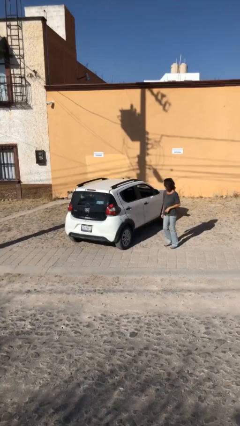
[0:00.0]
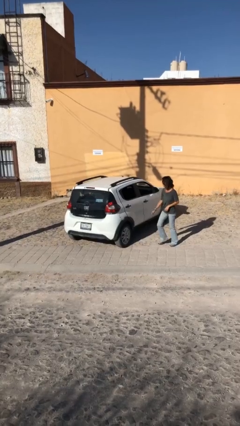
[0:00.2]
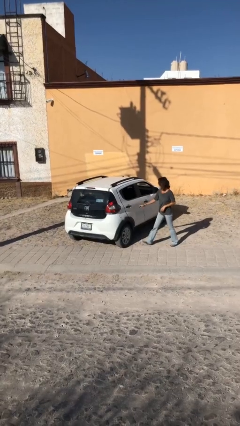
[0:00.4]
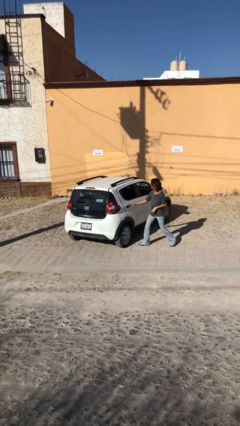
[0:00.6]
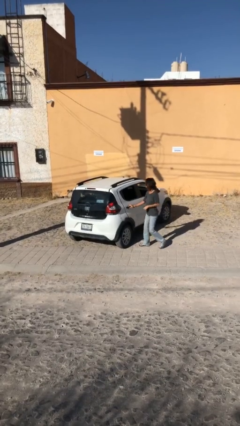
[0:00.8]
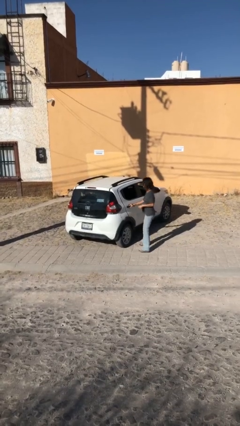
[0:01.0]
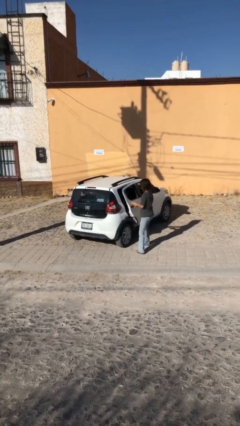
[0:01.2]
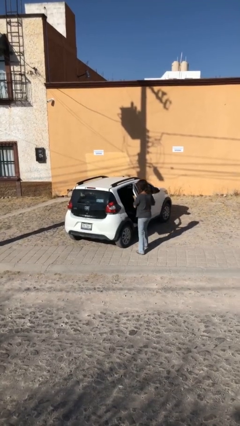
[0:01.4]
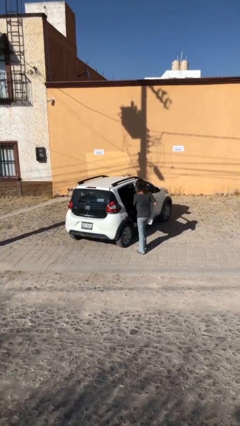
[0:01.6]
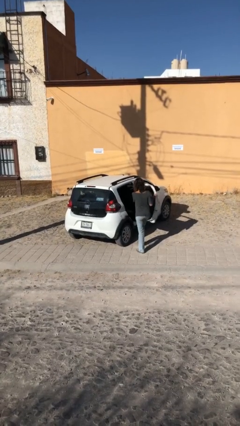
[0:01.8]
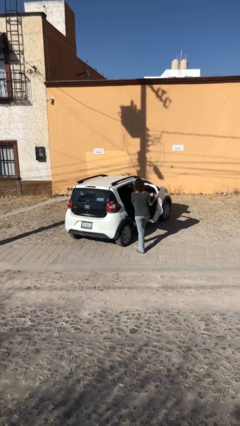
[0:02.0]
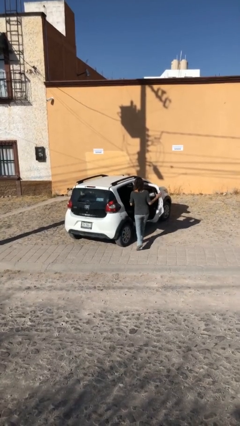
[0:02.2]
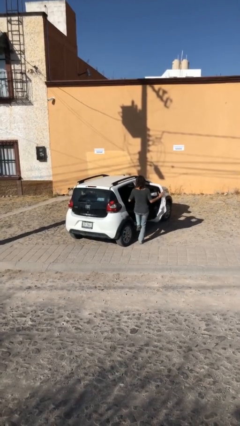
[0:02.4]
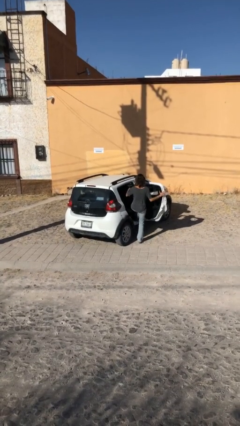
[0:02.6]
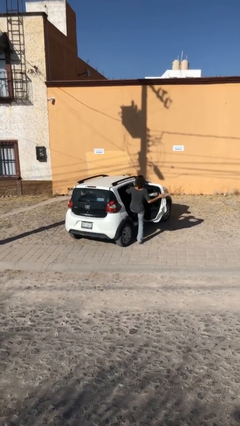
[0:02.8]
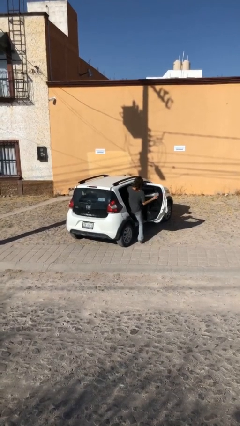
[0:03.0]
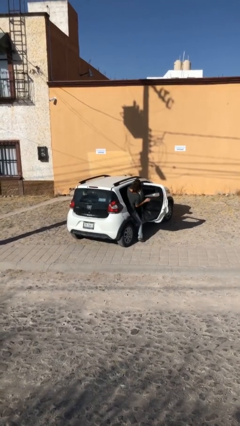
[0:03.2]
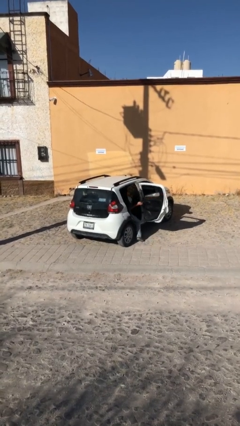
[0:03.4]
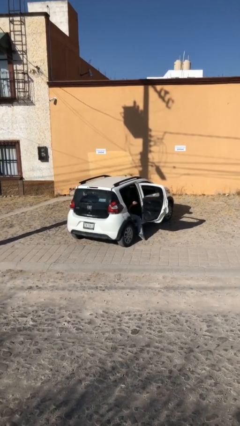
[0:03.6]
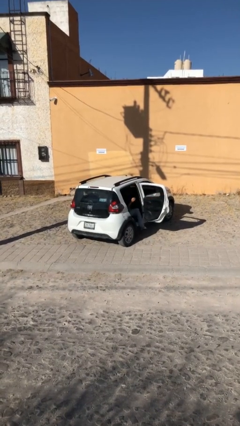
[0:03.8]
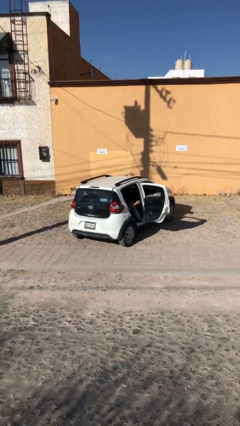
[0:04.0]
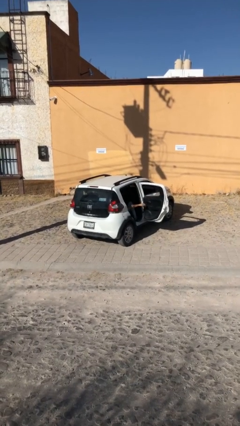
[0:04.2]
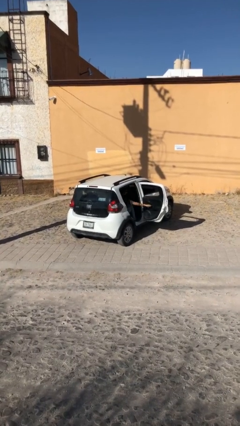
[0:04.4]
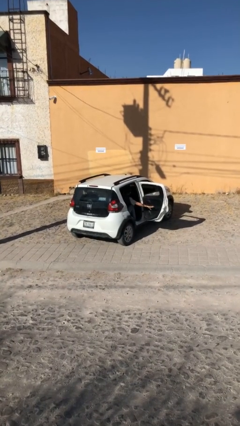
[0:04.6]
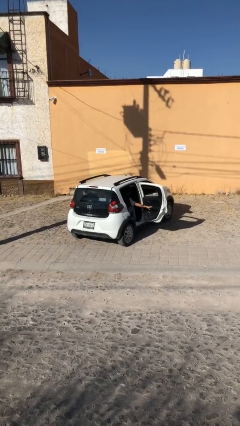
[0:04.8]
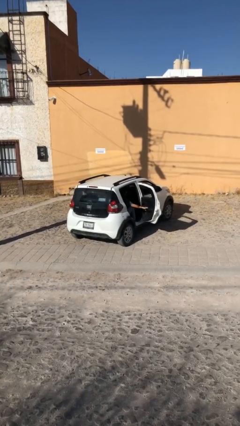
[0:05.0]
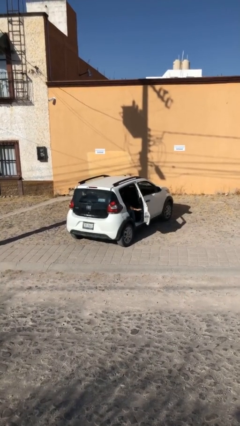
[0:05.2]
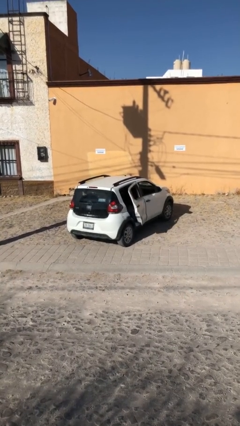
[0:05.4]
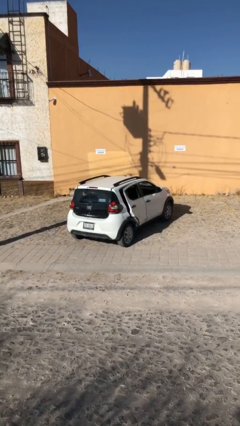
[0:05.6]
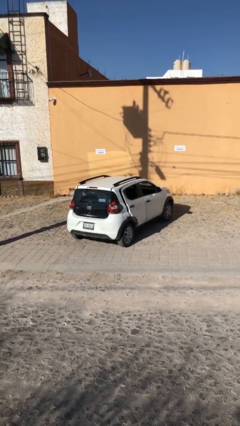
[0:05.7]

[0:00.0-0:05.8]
car picks up person

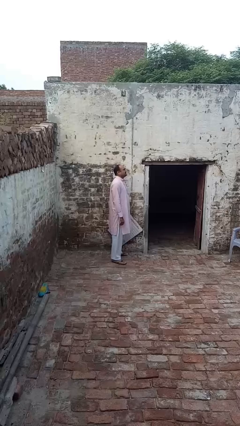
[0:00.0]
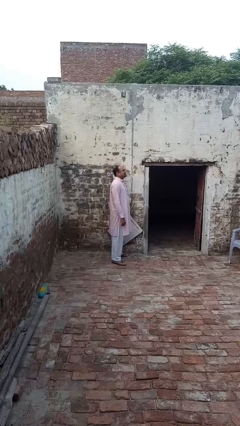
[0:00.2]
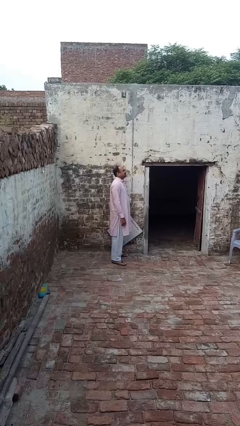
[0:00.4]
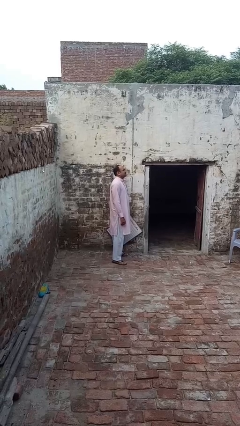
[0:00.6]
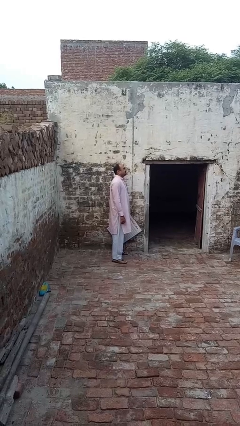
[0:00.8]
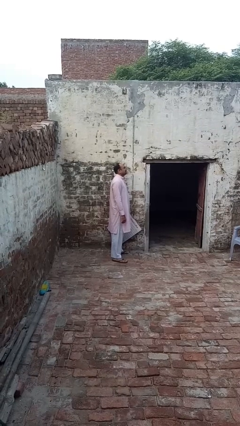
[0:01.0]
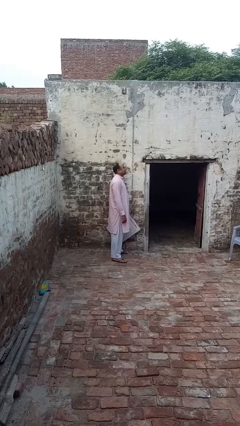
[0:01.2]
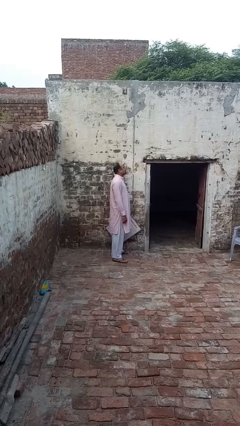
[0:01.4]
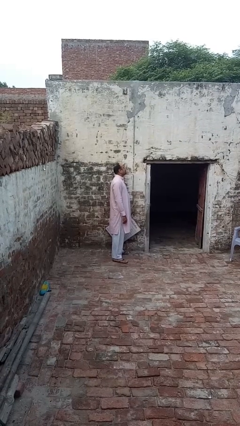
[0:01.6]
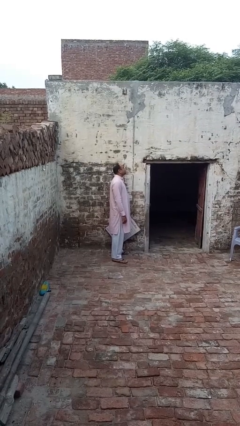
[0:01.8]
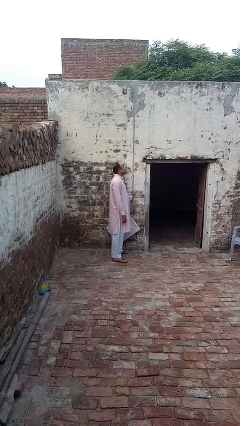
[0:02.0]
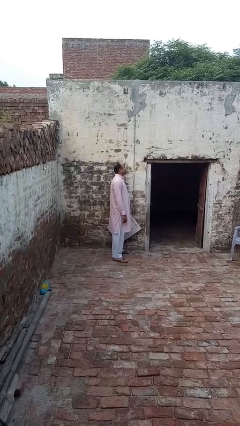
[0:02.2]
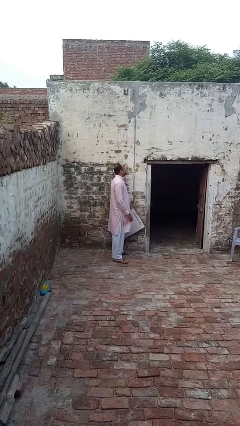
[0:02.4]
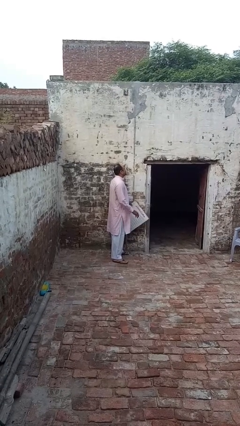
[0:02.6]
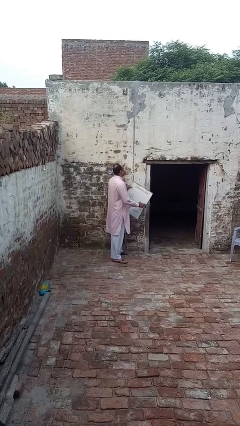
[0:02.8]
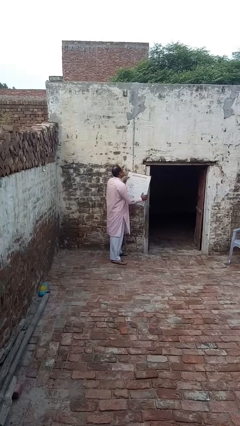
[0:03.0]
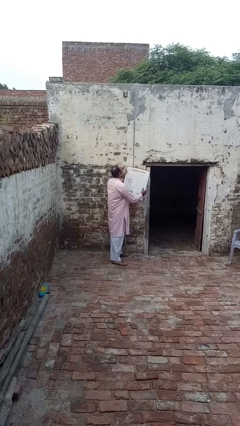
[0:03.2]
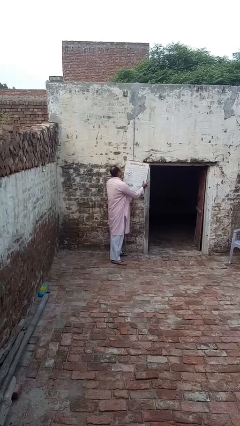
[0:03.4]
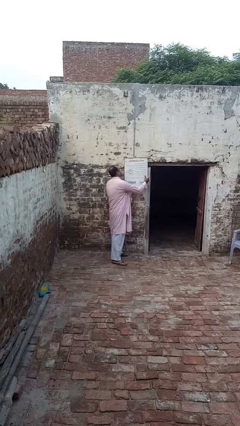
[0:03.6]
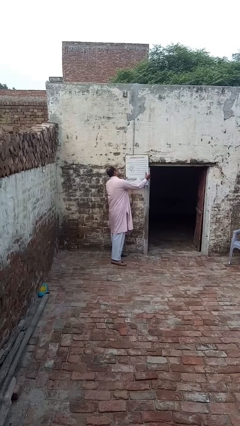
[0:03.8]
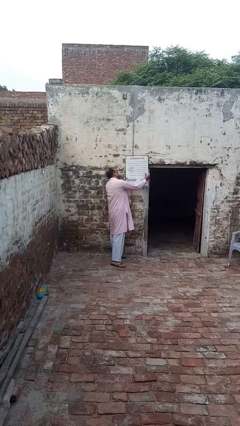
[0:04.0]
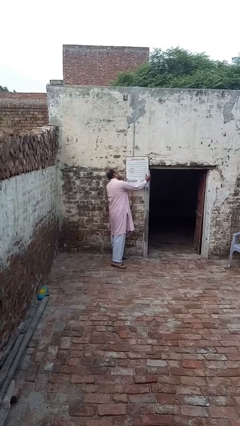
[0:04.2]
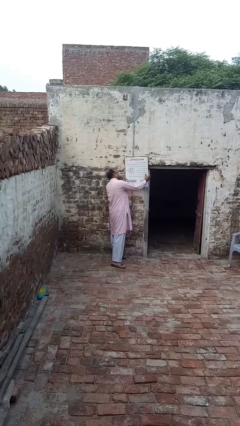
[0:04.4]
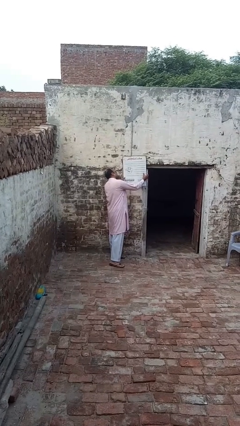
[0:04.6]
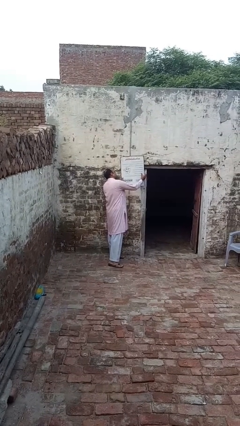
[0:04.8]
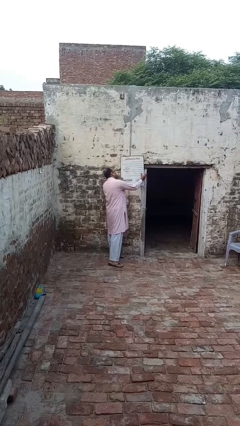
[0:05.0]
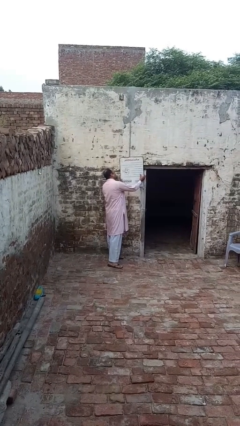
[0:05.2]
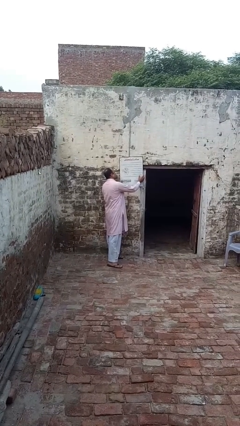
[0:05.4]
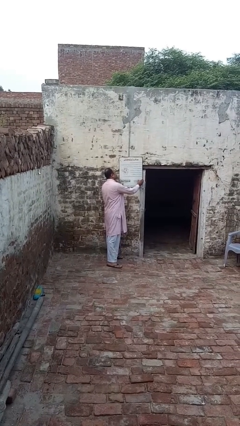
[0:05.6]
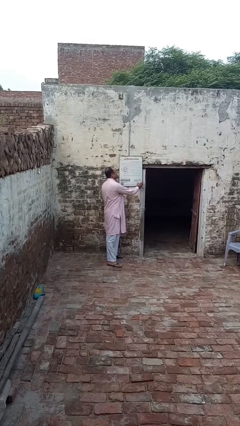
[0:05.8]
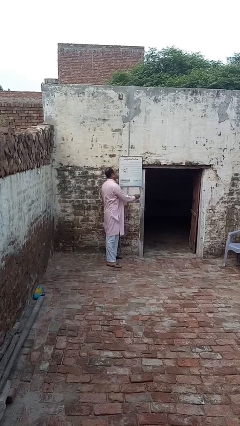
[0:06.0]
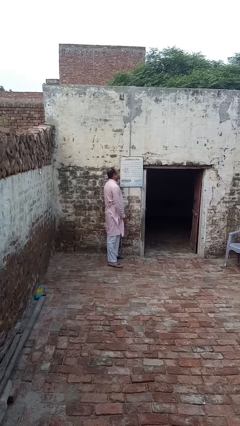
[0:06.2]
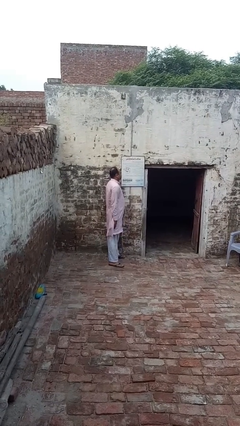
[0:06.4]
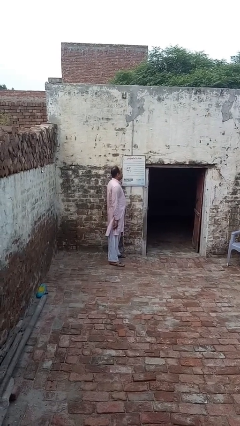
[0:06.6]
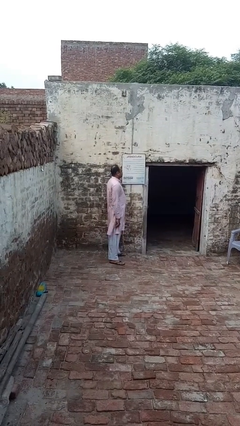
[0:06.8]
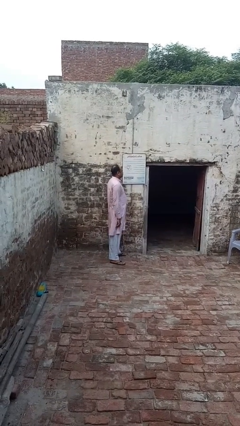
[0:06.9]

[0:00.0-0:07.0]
person puts up picture frame

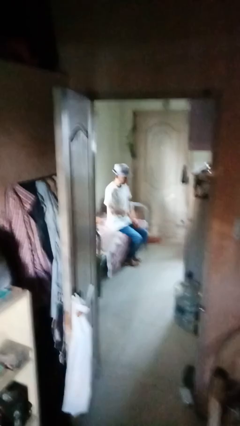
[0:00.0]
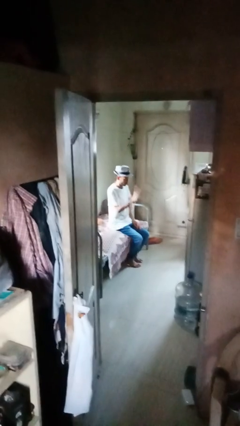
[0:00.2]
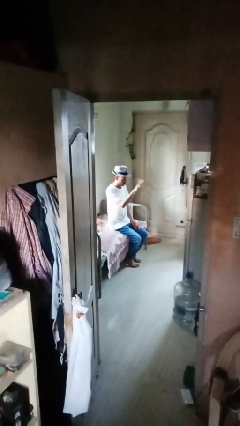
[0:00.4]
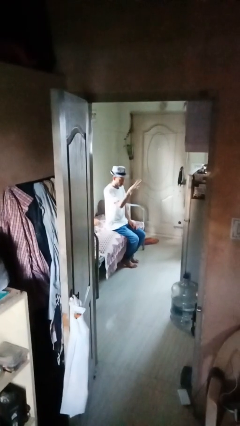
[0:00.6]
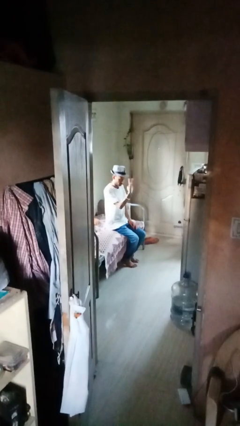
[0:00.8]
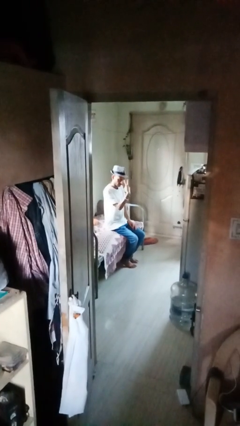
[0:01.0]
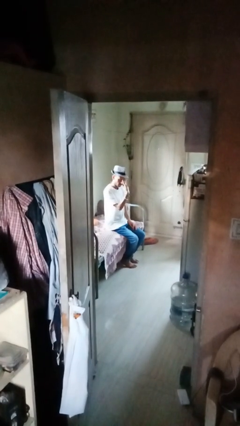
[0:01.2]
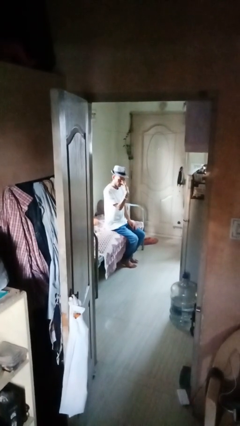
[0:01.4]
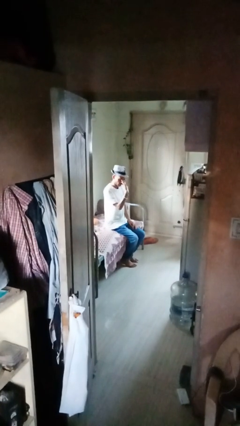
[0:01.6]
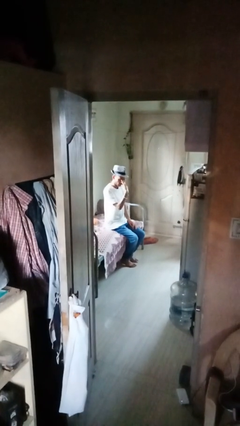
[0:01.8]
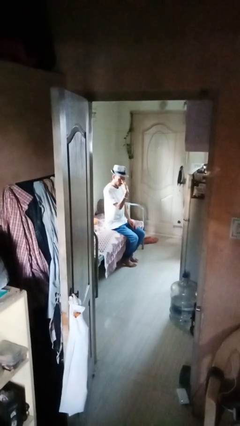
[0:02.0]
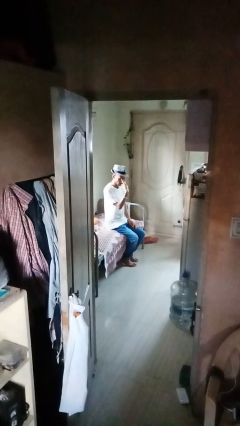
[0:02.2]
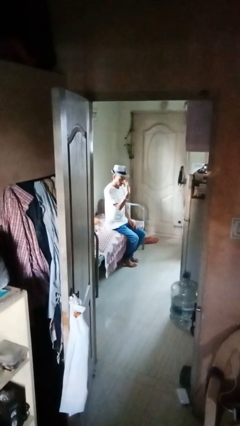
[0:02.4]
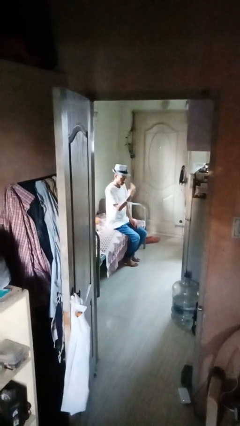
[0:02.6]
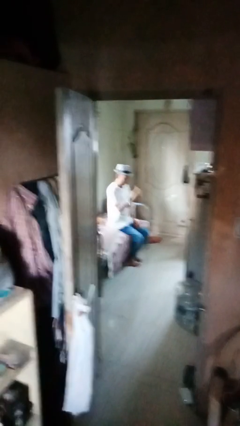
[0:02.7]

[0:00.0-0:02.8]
person gestures watch closely

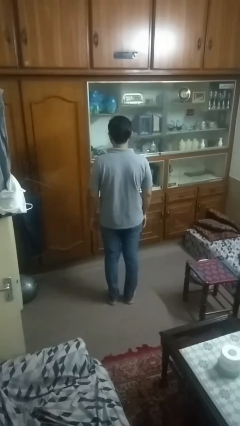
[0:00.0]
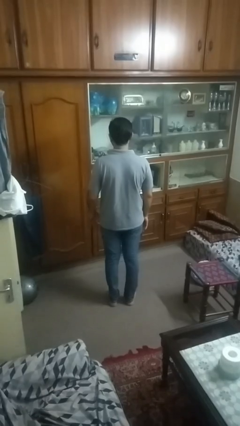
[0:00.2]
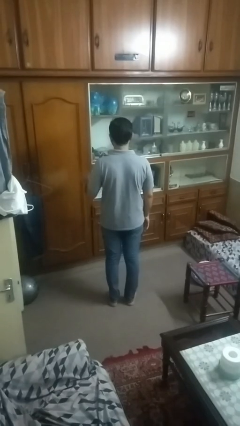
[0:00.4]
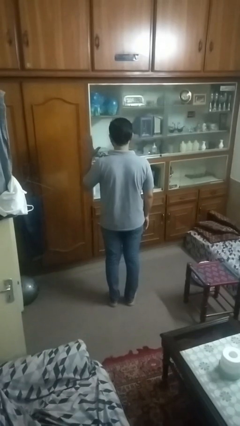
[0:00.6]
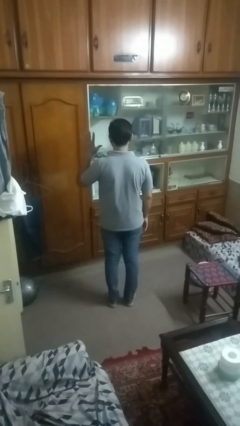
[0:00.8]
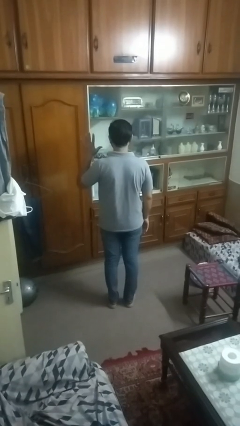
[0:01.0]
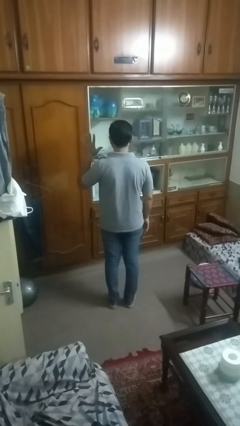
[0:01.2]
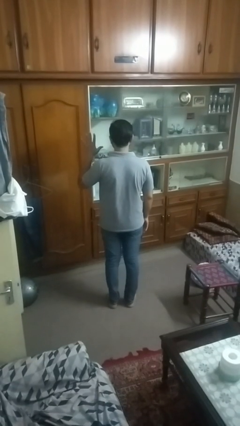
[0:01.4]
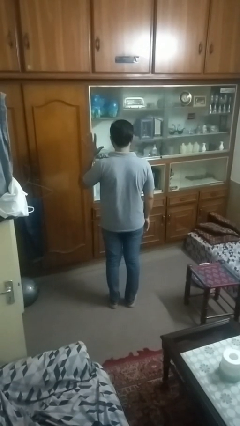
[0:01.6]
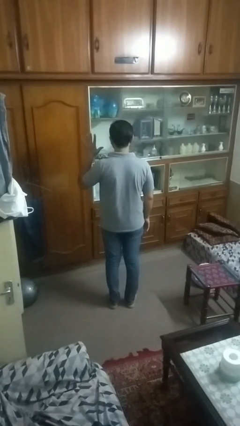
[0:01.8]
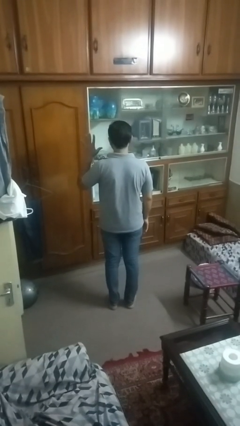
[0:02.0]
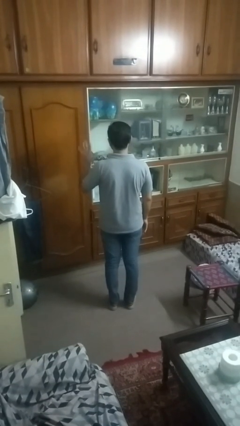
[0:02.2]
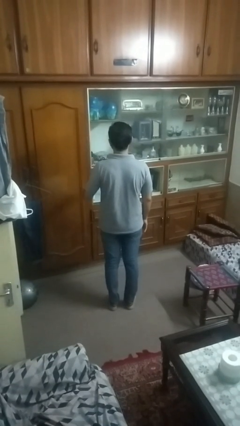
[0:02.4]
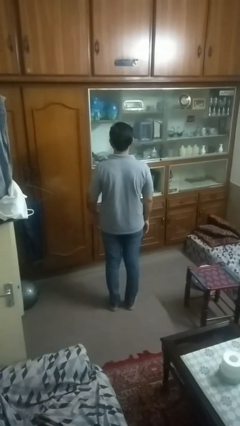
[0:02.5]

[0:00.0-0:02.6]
person gestures number five
